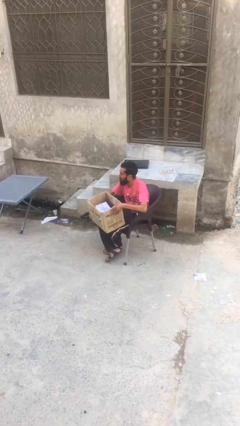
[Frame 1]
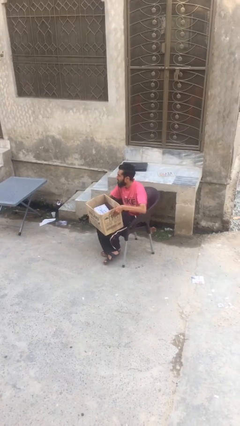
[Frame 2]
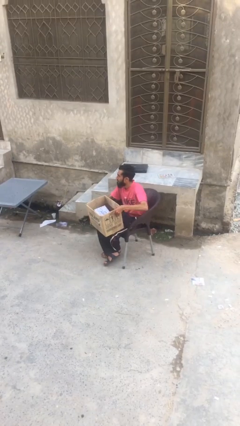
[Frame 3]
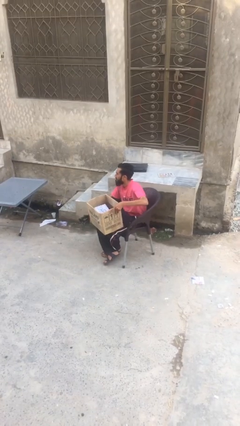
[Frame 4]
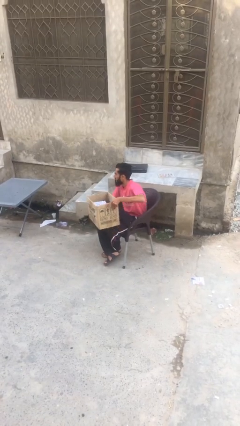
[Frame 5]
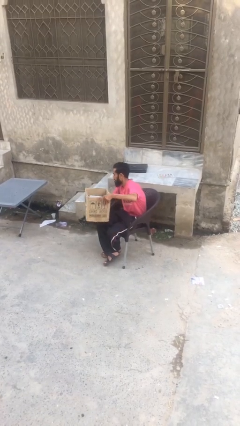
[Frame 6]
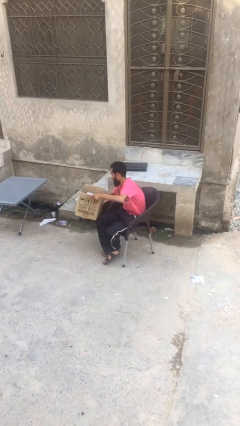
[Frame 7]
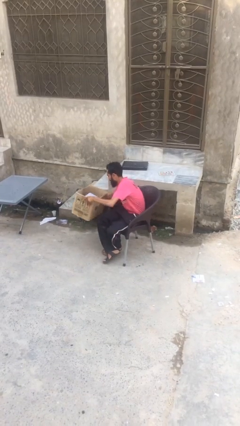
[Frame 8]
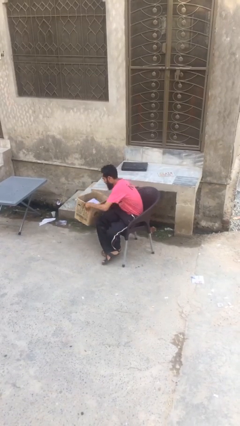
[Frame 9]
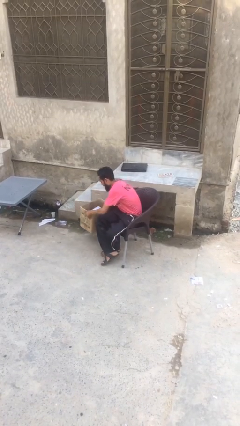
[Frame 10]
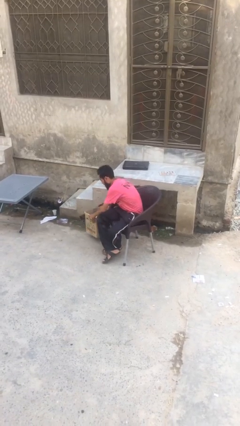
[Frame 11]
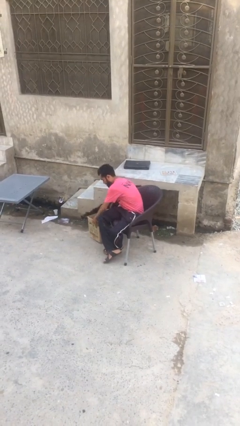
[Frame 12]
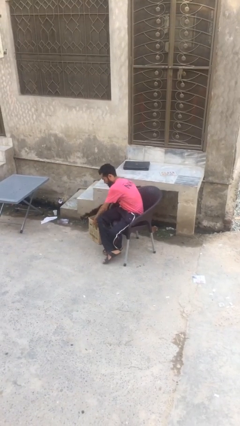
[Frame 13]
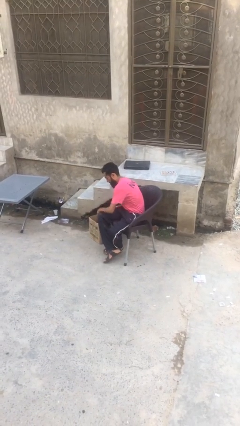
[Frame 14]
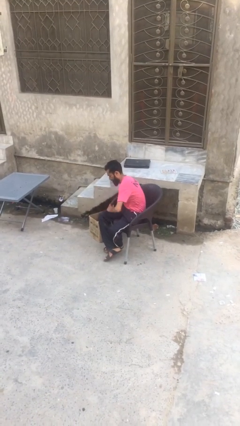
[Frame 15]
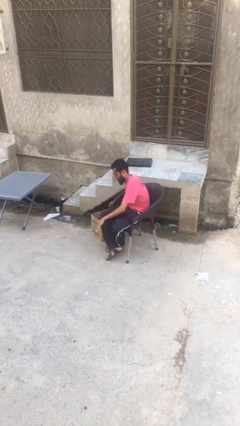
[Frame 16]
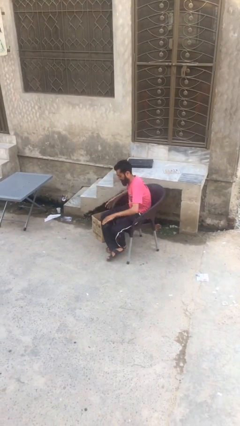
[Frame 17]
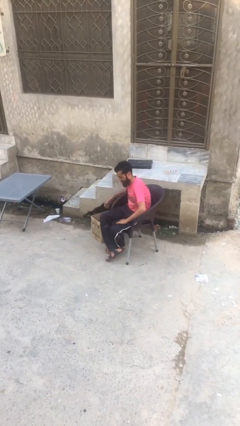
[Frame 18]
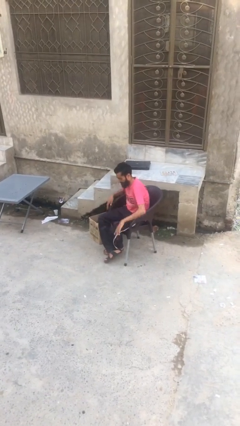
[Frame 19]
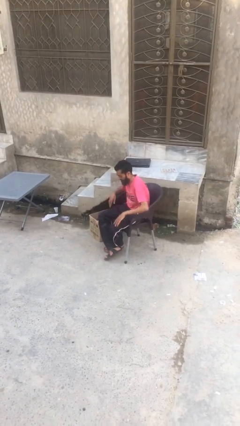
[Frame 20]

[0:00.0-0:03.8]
person puts down object on floor

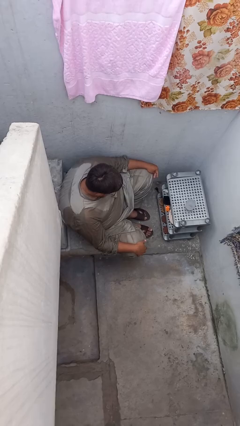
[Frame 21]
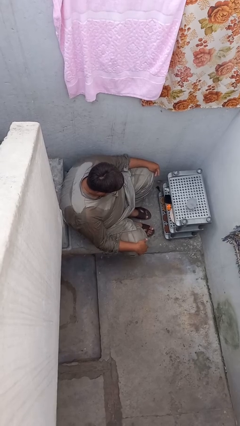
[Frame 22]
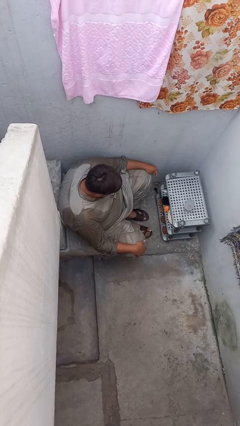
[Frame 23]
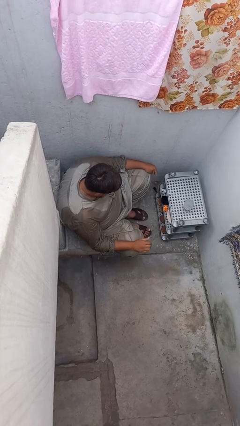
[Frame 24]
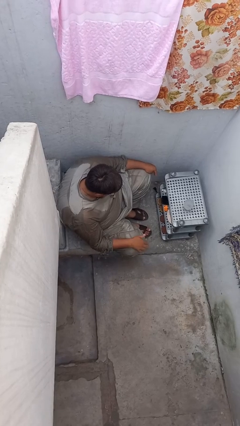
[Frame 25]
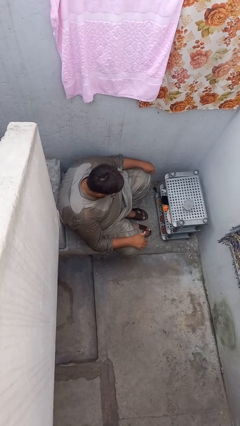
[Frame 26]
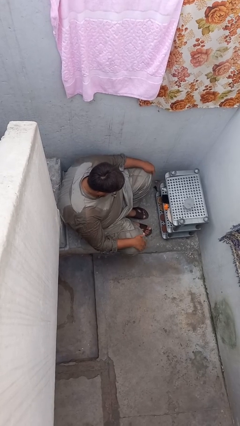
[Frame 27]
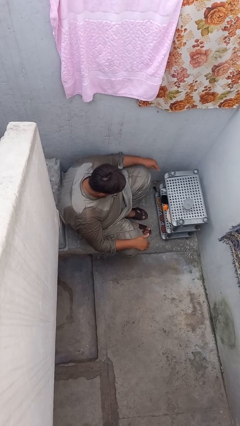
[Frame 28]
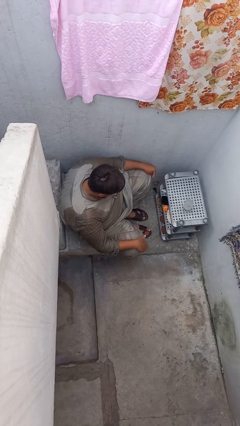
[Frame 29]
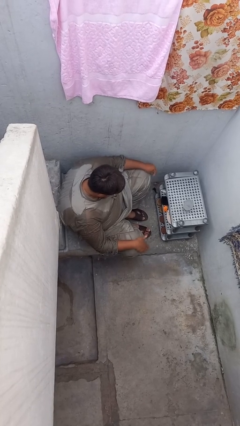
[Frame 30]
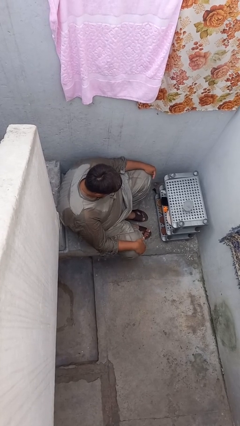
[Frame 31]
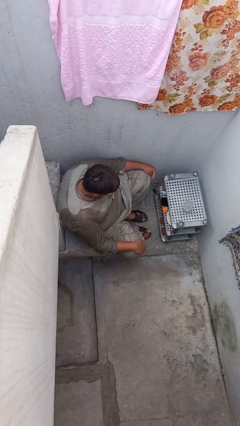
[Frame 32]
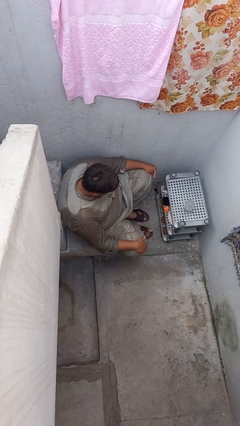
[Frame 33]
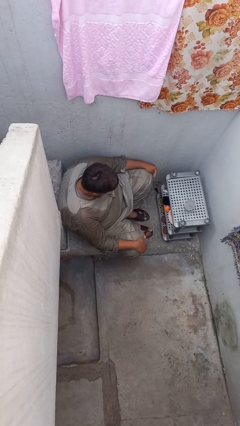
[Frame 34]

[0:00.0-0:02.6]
person slaps hands on thighs

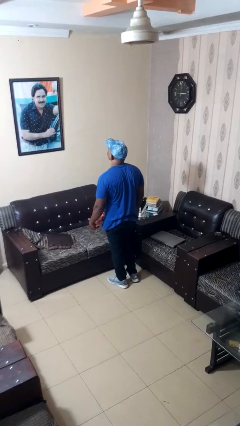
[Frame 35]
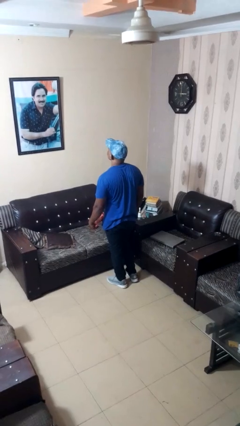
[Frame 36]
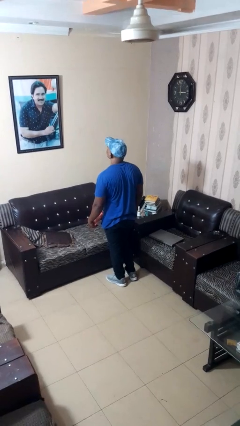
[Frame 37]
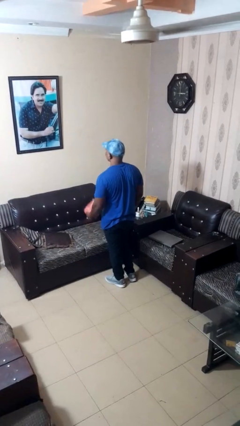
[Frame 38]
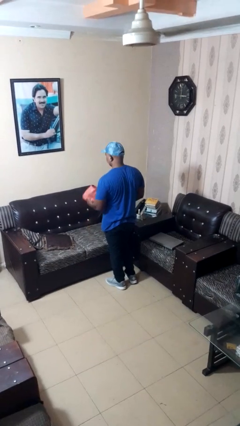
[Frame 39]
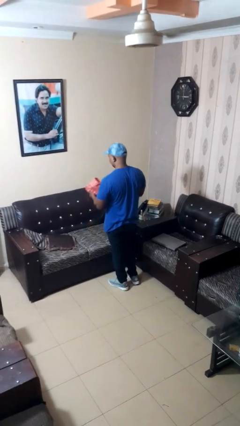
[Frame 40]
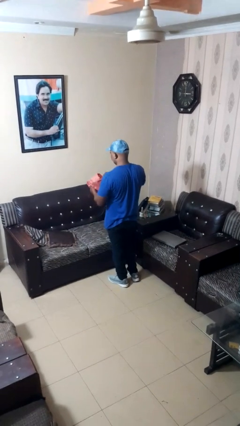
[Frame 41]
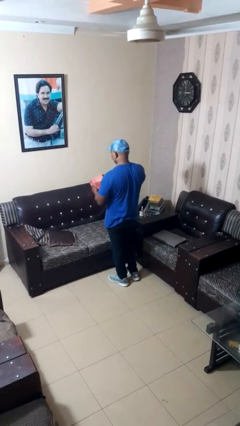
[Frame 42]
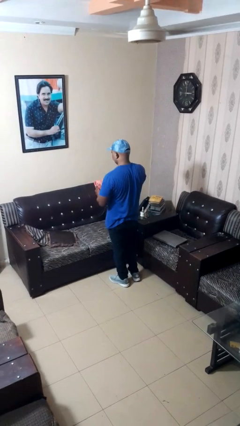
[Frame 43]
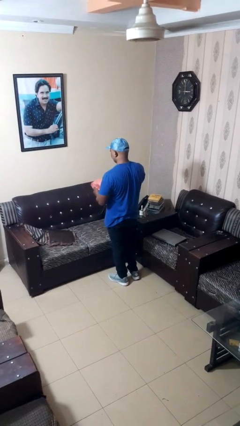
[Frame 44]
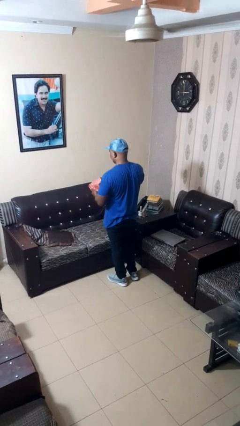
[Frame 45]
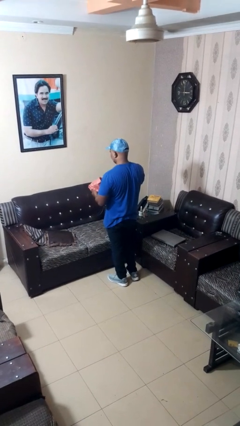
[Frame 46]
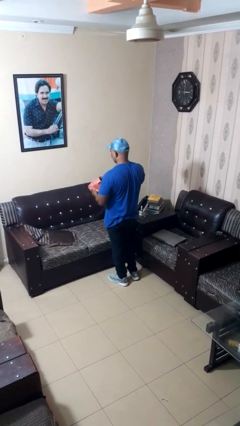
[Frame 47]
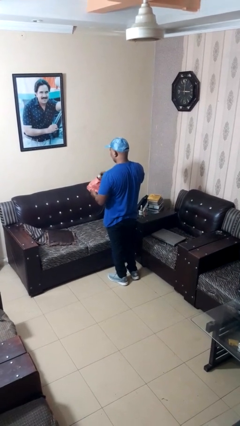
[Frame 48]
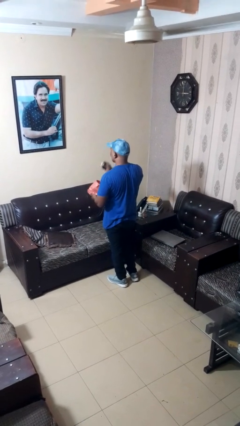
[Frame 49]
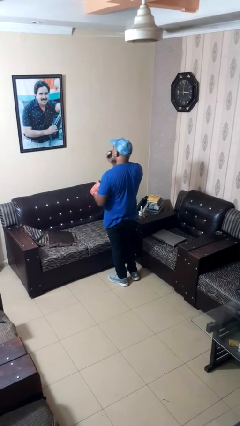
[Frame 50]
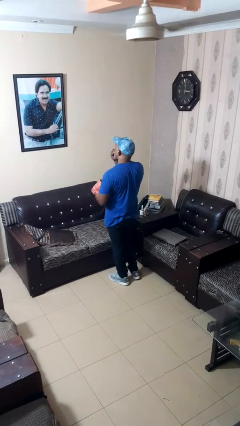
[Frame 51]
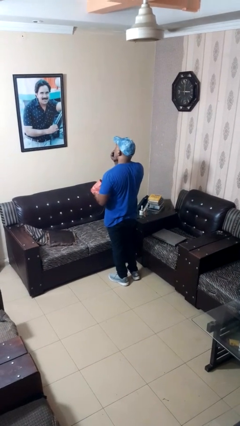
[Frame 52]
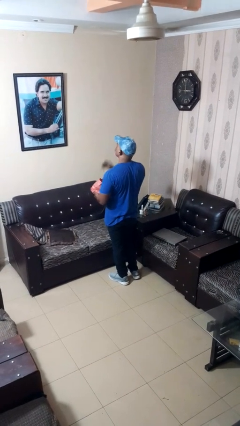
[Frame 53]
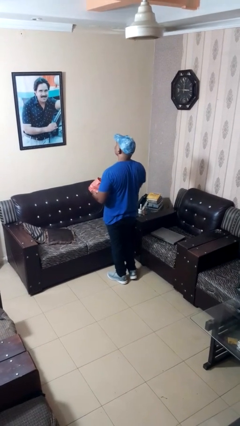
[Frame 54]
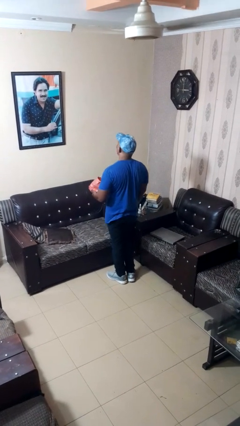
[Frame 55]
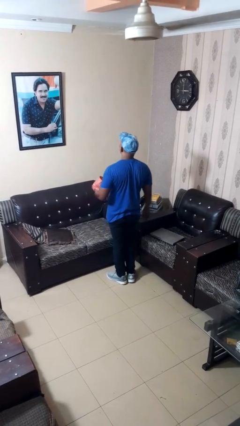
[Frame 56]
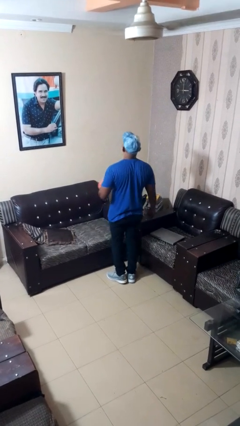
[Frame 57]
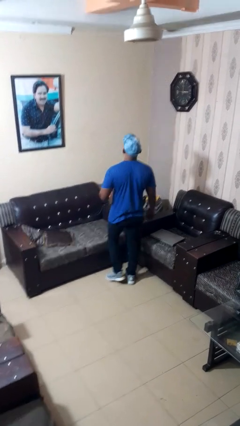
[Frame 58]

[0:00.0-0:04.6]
person eats snack from bag

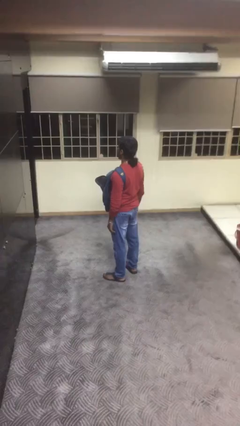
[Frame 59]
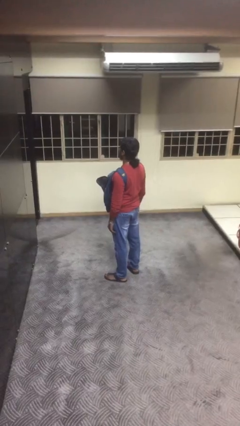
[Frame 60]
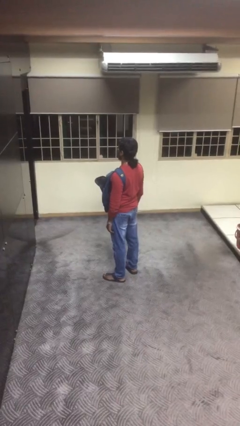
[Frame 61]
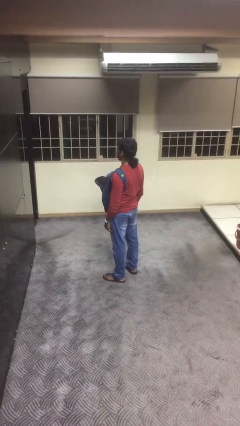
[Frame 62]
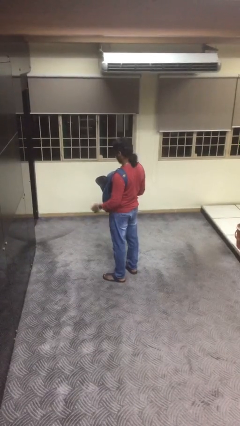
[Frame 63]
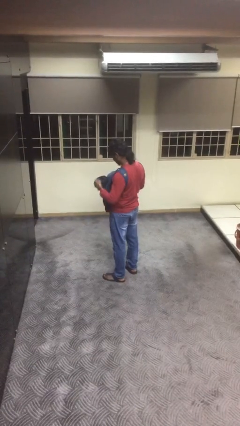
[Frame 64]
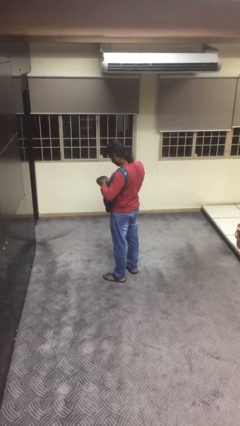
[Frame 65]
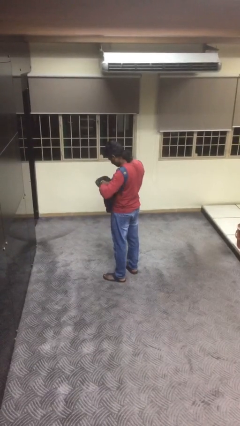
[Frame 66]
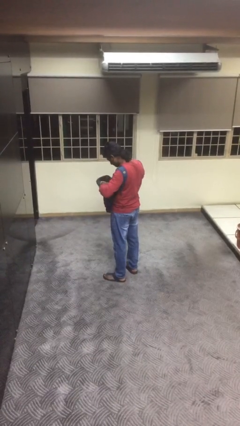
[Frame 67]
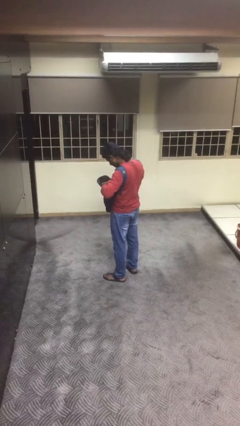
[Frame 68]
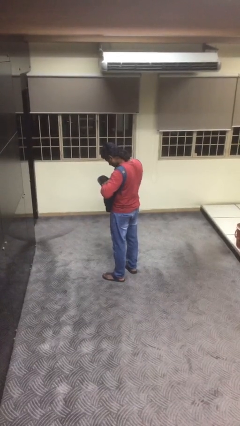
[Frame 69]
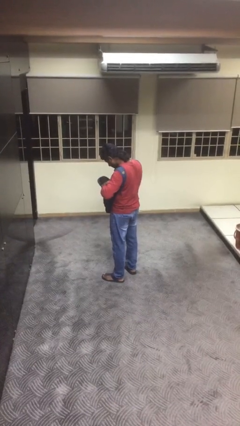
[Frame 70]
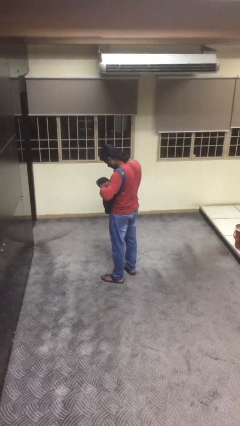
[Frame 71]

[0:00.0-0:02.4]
person searches in backpack

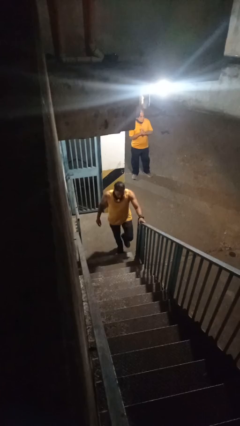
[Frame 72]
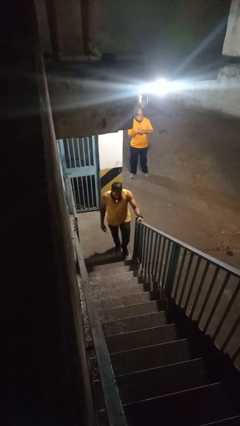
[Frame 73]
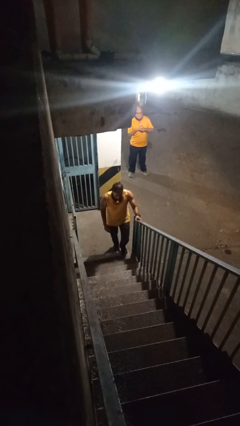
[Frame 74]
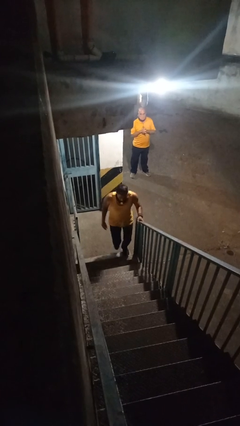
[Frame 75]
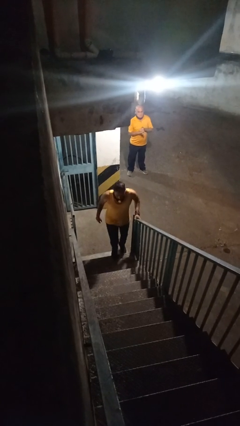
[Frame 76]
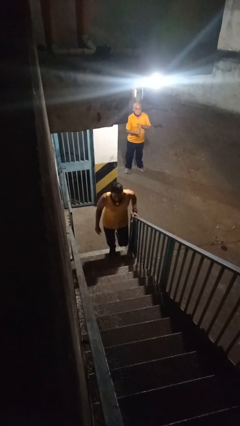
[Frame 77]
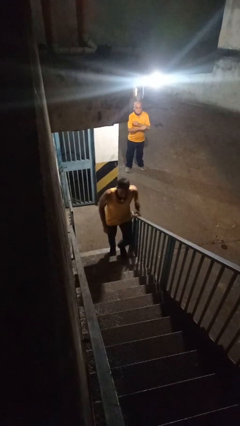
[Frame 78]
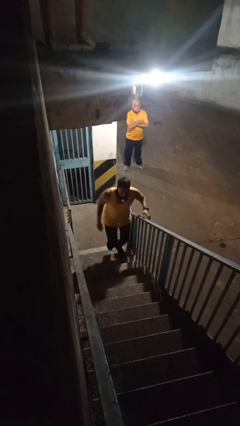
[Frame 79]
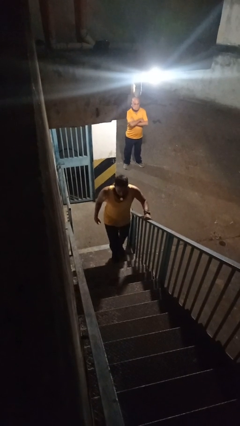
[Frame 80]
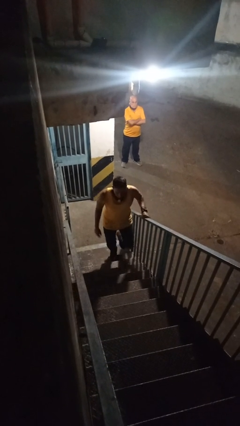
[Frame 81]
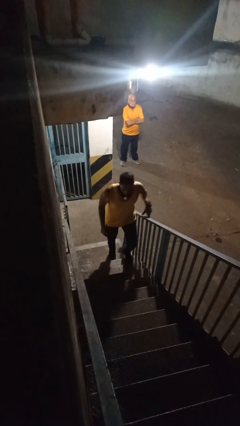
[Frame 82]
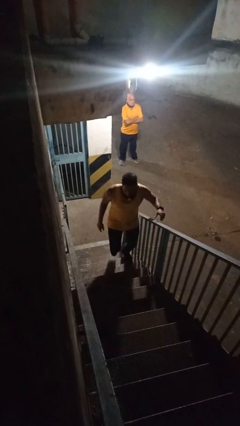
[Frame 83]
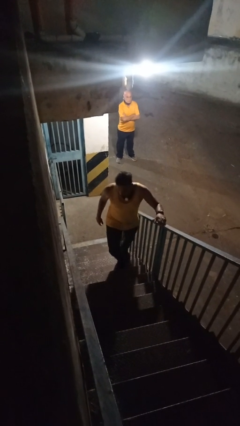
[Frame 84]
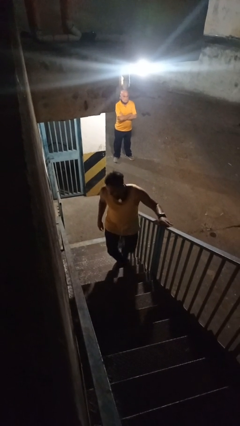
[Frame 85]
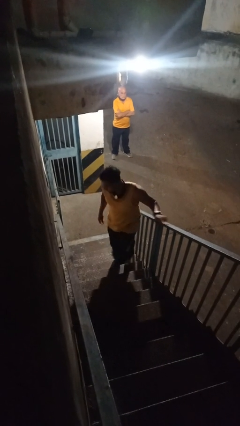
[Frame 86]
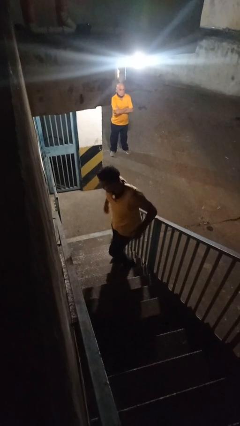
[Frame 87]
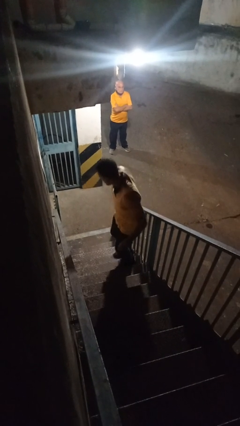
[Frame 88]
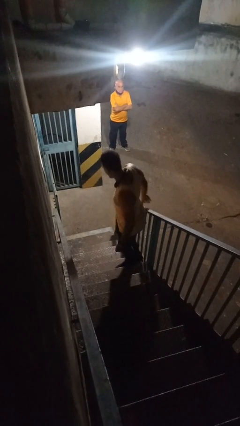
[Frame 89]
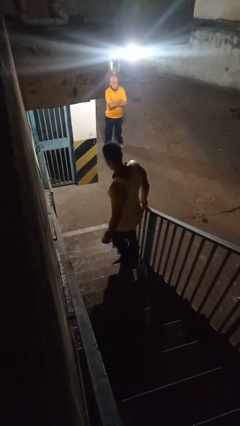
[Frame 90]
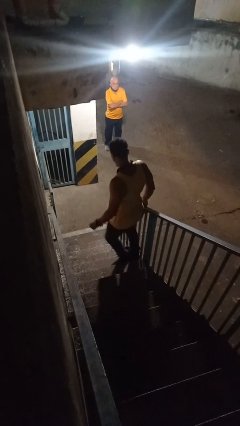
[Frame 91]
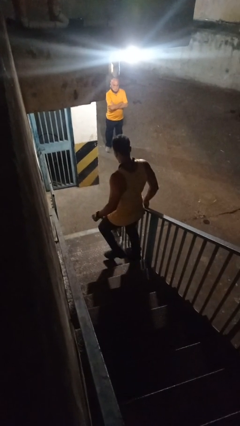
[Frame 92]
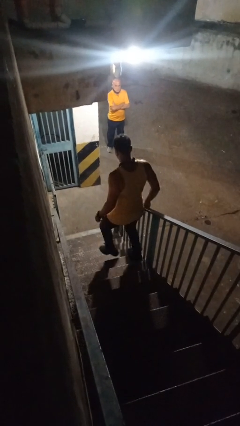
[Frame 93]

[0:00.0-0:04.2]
person climbs up stairs
